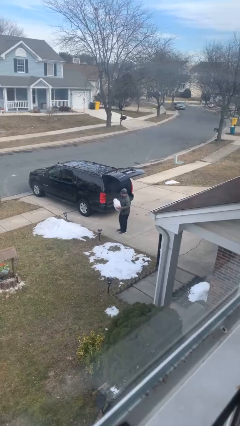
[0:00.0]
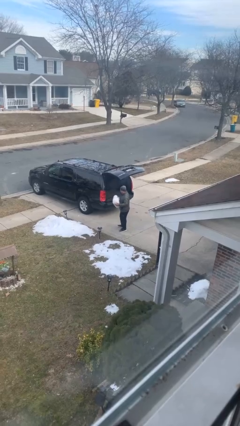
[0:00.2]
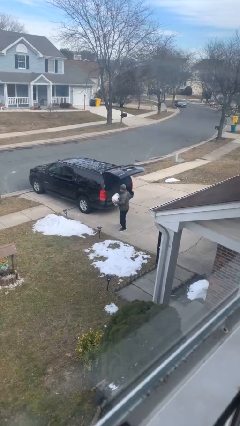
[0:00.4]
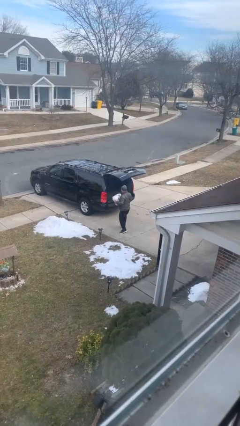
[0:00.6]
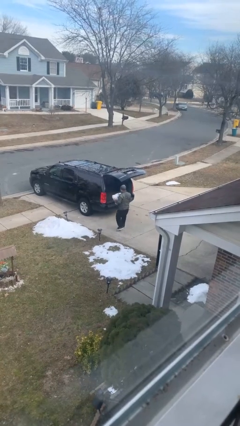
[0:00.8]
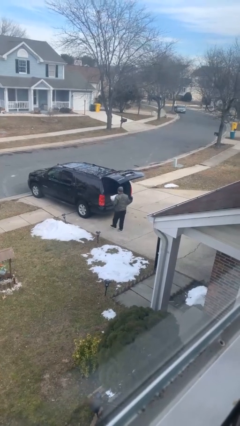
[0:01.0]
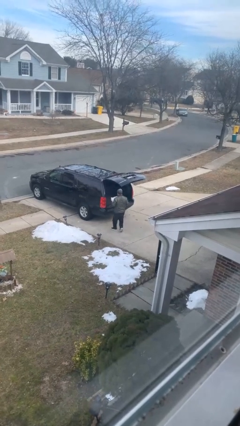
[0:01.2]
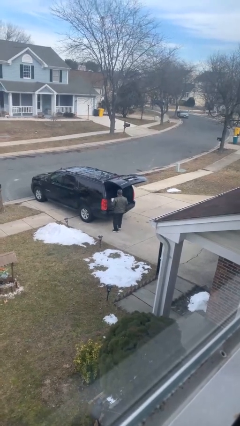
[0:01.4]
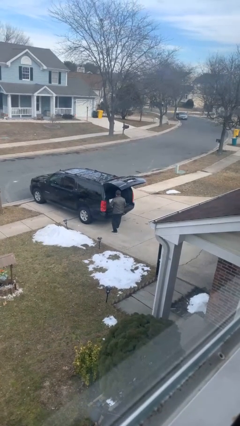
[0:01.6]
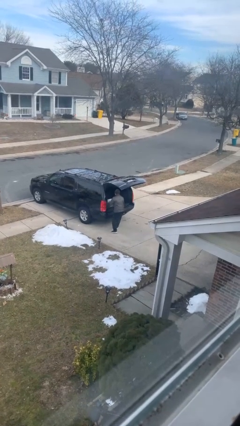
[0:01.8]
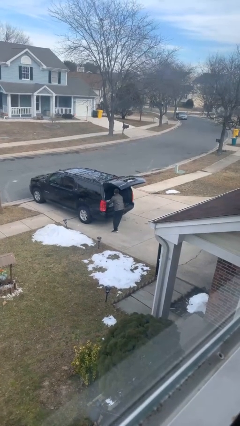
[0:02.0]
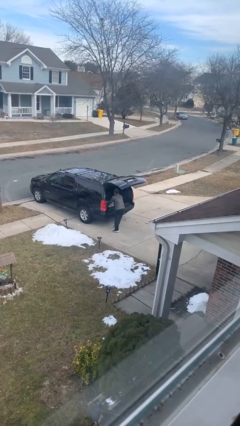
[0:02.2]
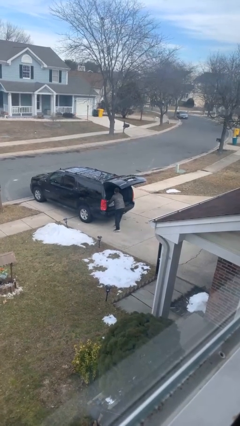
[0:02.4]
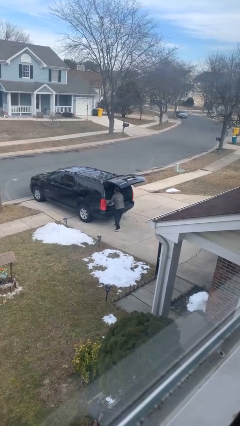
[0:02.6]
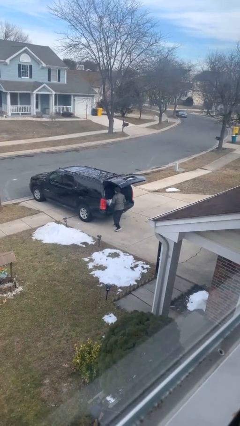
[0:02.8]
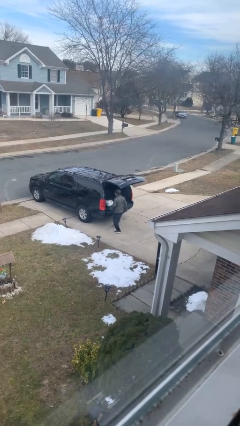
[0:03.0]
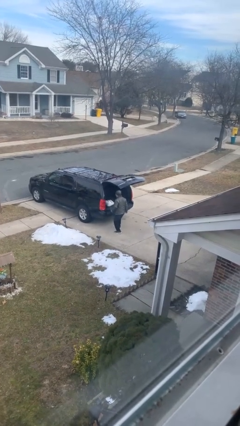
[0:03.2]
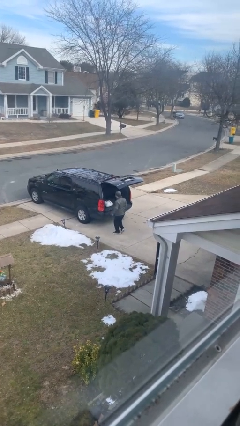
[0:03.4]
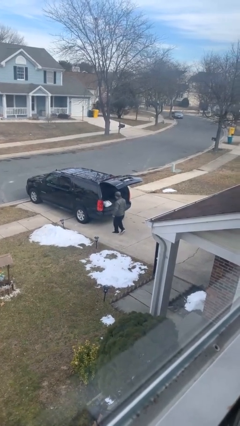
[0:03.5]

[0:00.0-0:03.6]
person loads car

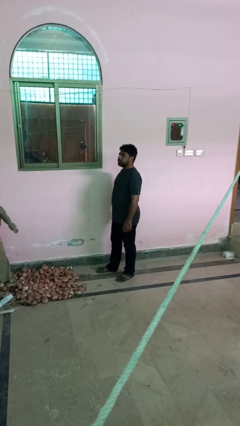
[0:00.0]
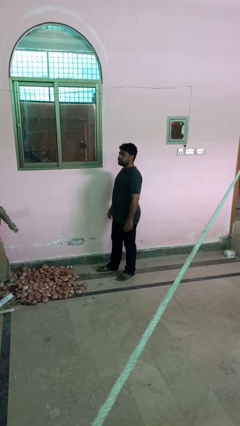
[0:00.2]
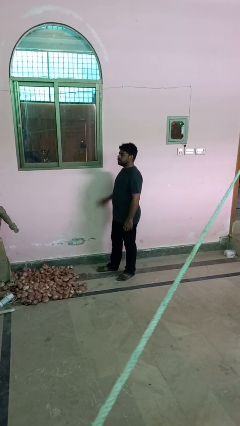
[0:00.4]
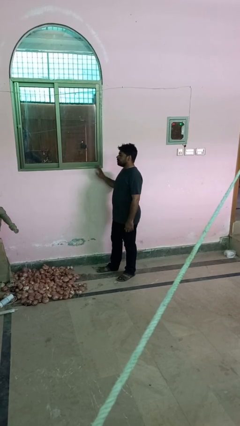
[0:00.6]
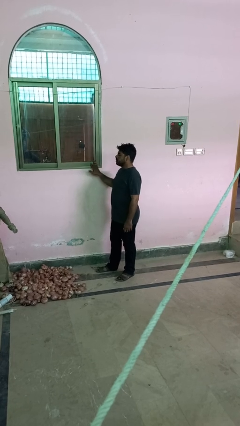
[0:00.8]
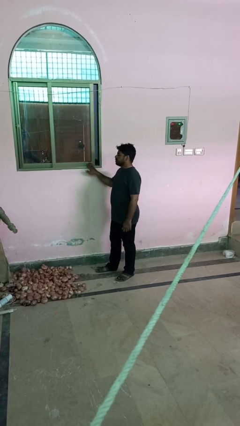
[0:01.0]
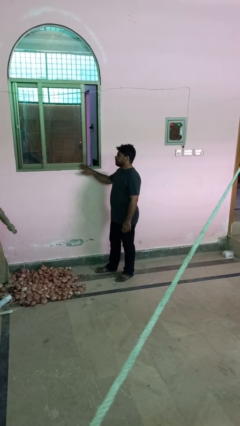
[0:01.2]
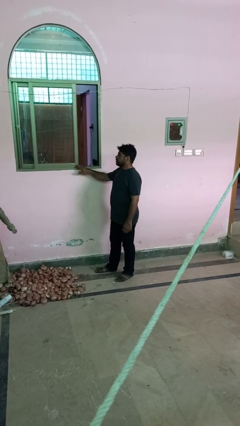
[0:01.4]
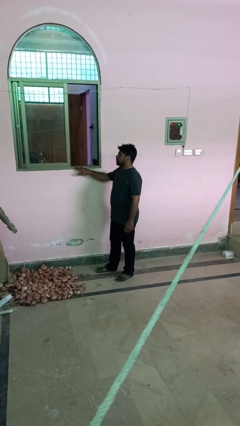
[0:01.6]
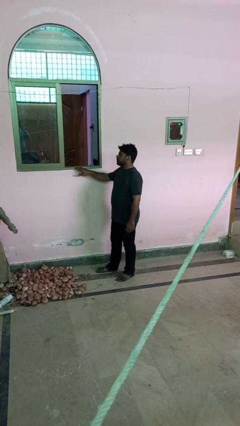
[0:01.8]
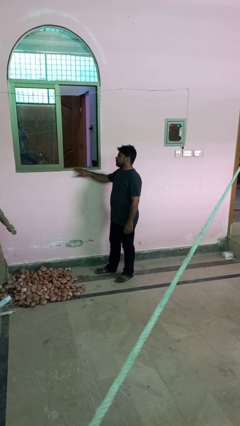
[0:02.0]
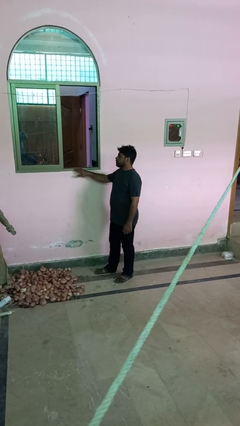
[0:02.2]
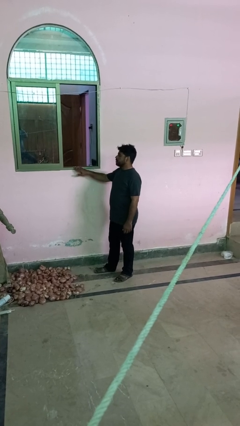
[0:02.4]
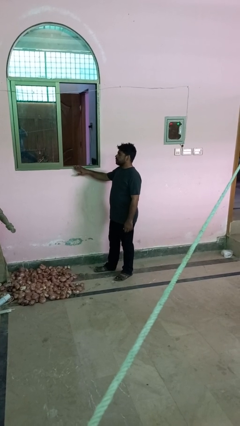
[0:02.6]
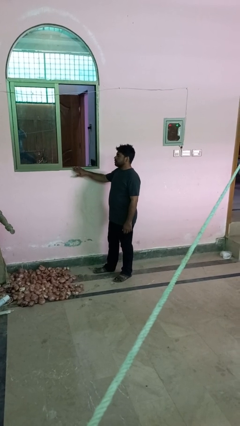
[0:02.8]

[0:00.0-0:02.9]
person opens sliding door

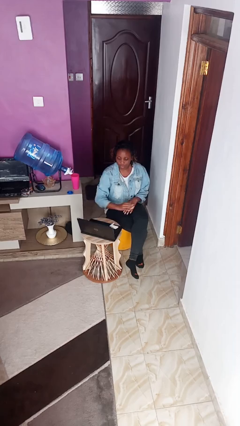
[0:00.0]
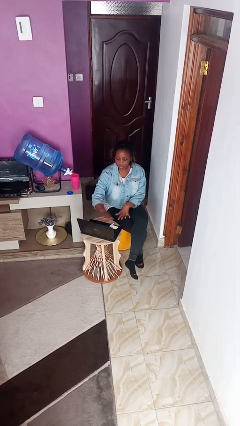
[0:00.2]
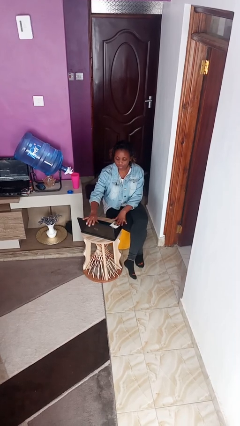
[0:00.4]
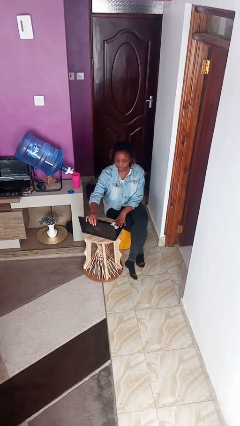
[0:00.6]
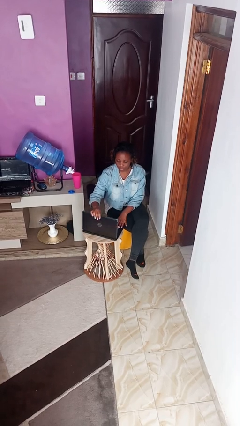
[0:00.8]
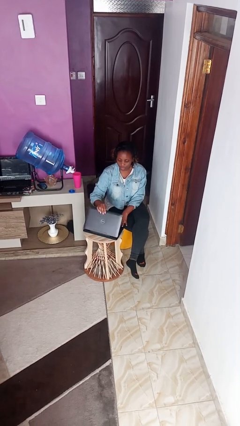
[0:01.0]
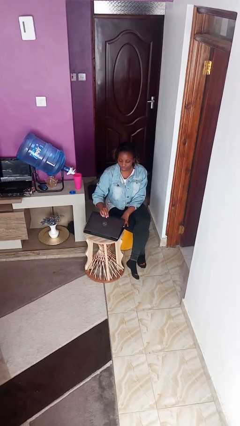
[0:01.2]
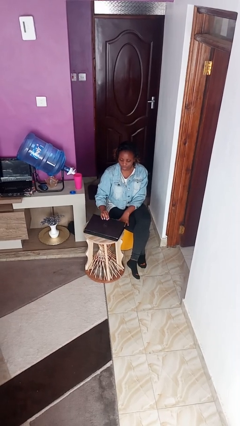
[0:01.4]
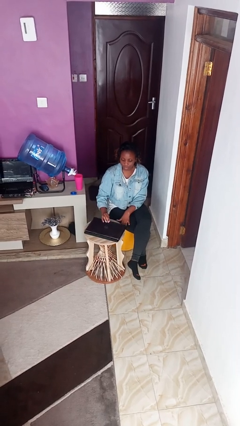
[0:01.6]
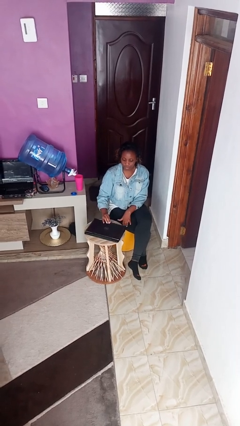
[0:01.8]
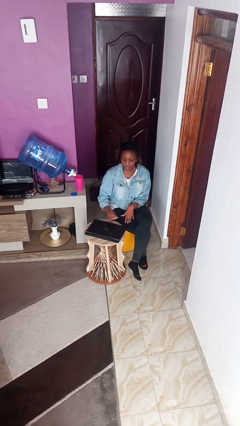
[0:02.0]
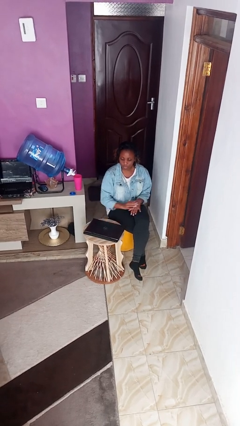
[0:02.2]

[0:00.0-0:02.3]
person closes laptop

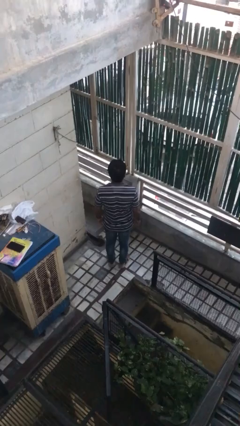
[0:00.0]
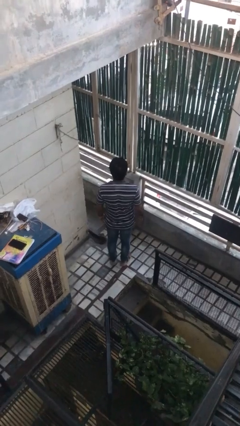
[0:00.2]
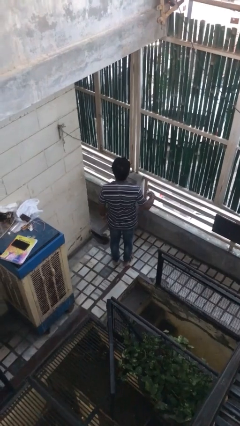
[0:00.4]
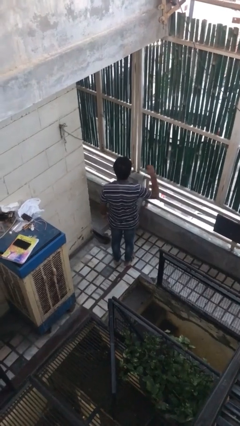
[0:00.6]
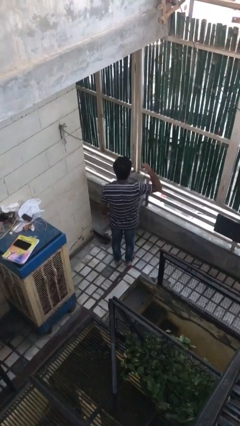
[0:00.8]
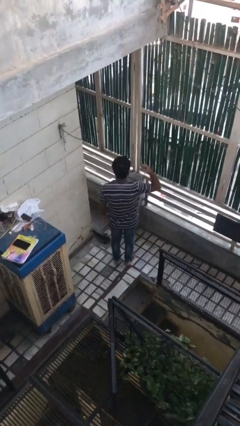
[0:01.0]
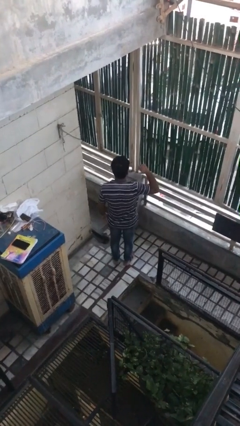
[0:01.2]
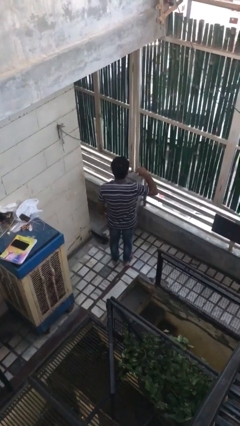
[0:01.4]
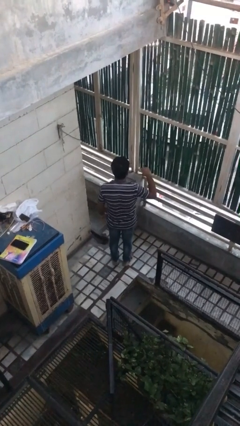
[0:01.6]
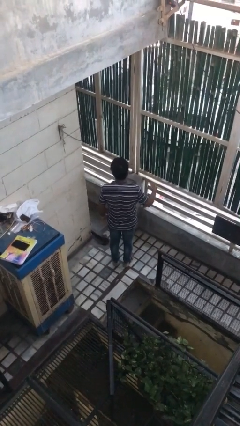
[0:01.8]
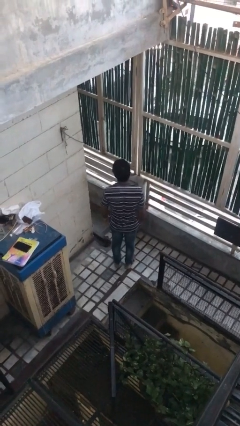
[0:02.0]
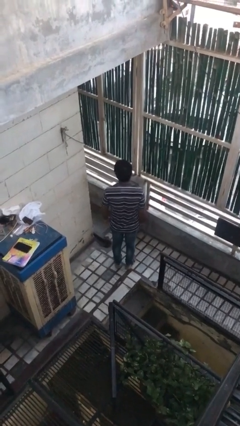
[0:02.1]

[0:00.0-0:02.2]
person gestures behind me

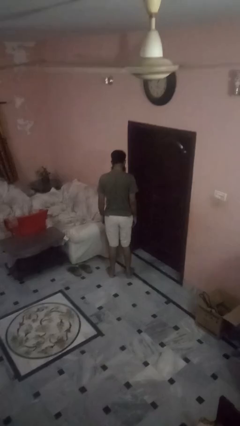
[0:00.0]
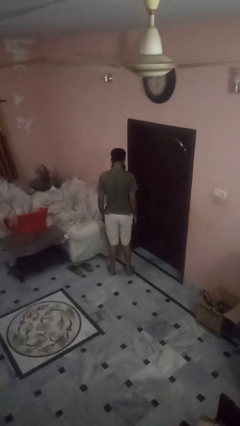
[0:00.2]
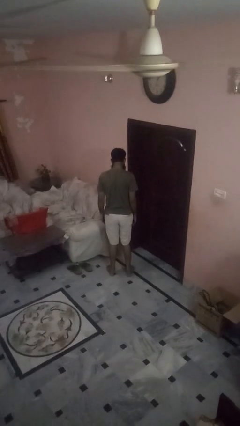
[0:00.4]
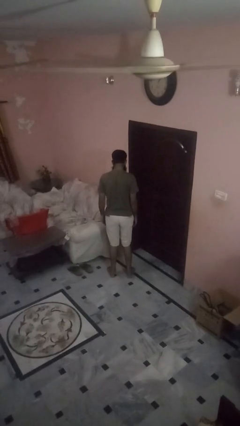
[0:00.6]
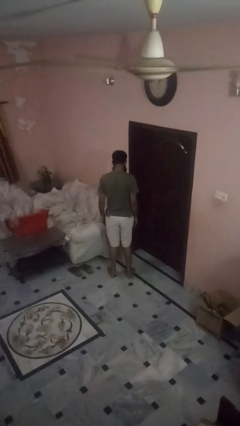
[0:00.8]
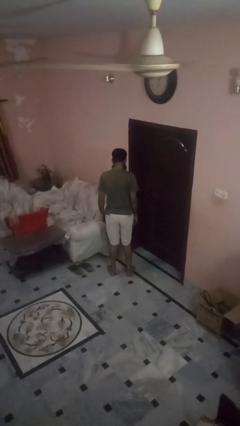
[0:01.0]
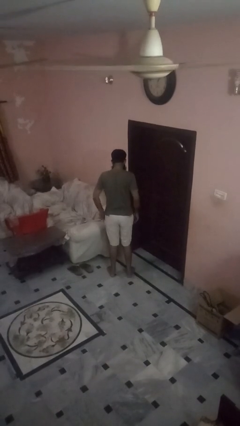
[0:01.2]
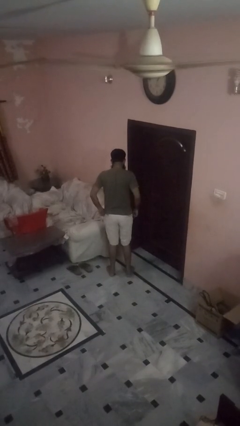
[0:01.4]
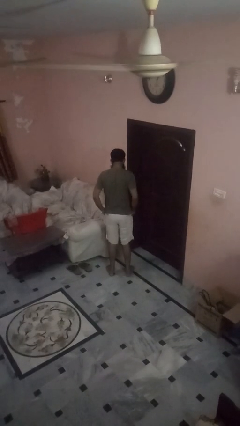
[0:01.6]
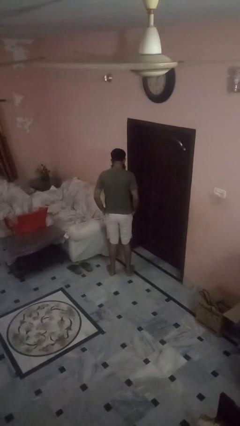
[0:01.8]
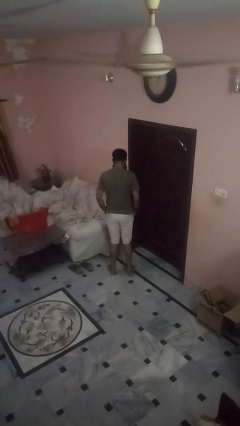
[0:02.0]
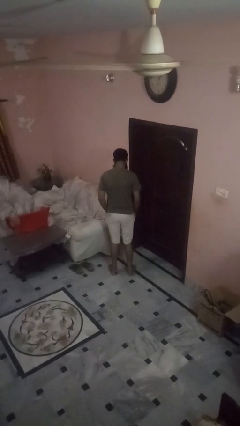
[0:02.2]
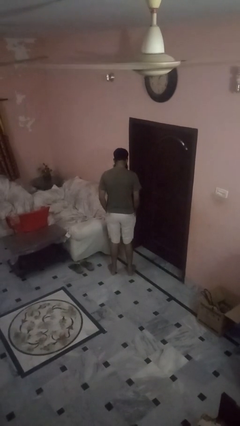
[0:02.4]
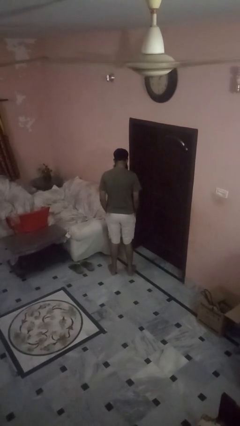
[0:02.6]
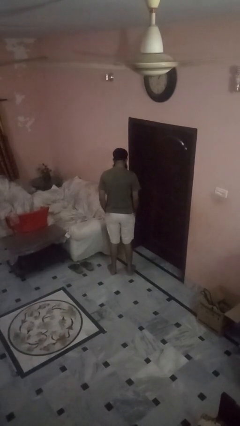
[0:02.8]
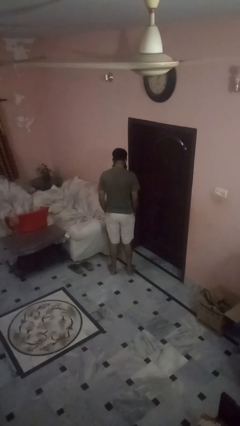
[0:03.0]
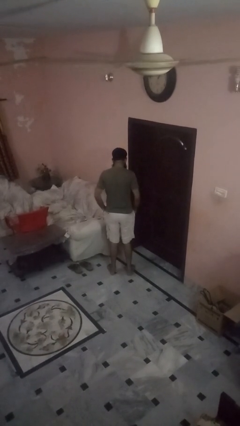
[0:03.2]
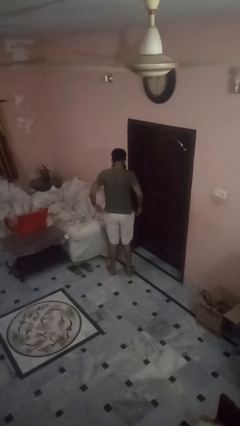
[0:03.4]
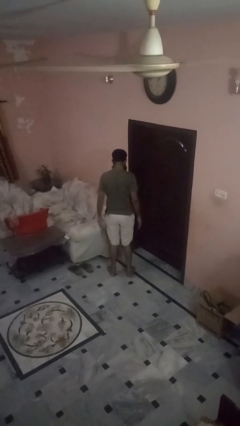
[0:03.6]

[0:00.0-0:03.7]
person puts hands in back pockets

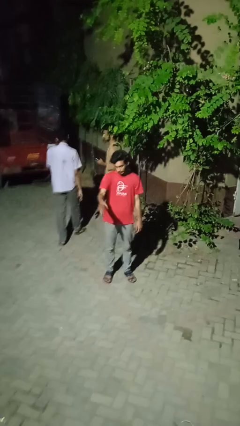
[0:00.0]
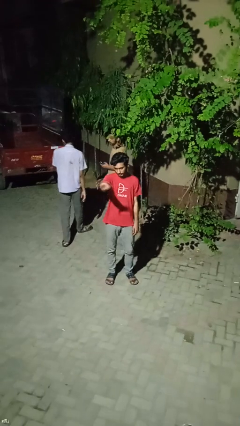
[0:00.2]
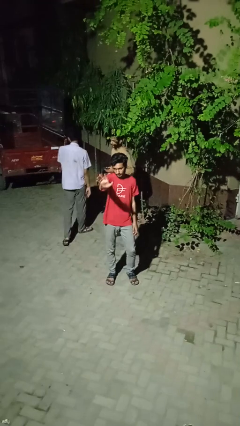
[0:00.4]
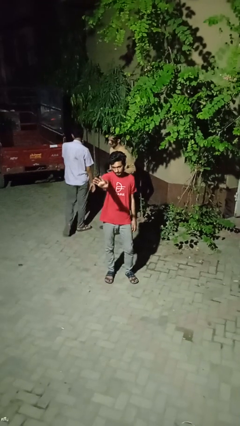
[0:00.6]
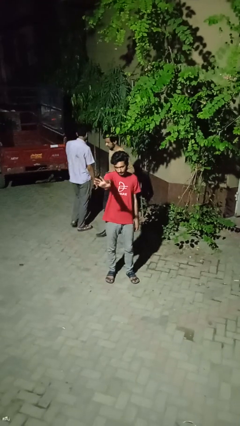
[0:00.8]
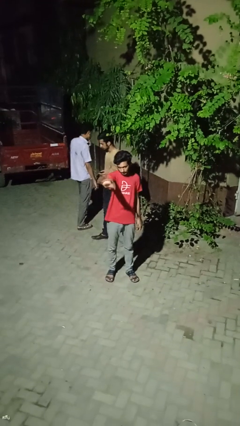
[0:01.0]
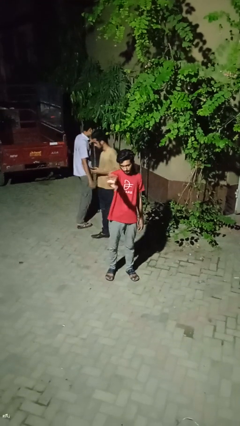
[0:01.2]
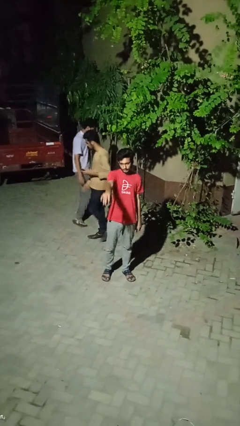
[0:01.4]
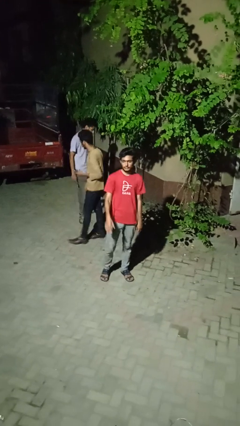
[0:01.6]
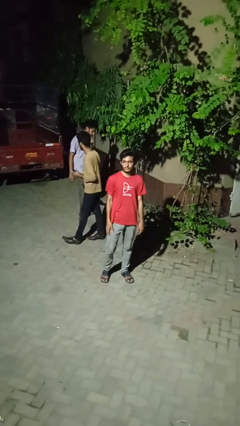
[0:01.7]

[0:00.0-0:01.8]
person waves at person

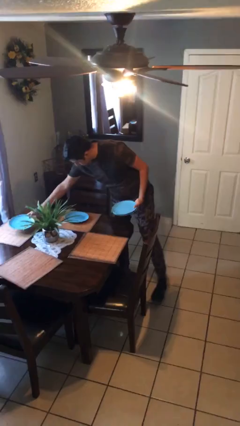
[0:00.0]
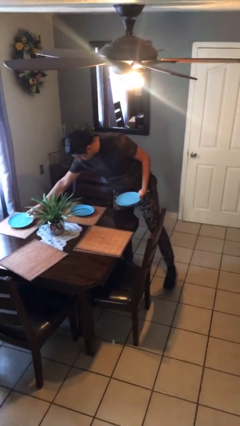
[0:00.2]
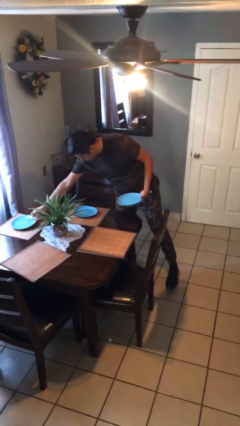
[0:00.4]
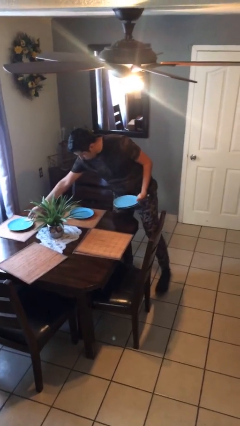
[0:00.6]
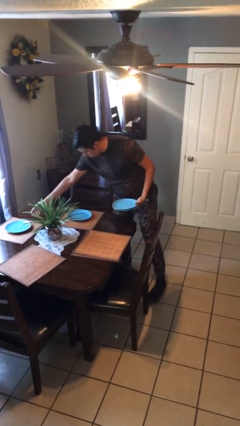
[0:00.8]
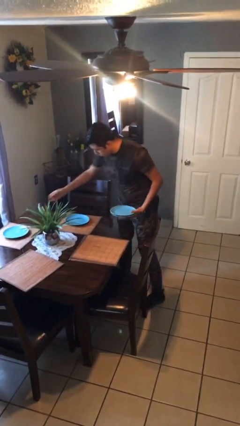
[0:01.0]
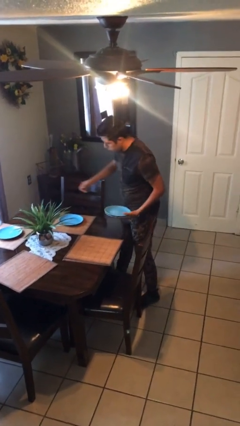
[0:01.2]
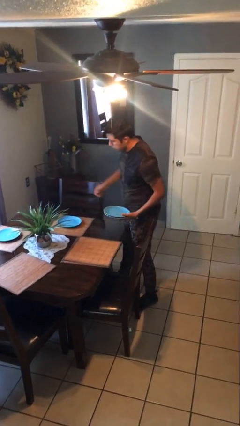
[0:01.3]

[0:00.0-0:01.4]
person sets table
